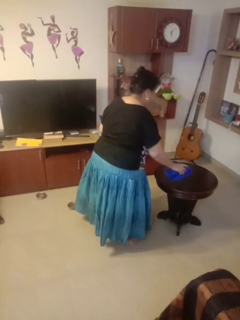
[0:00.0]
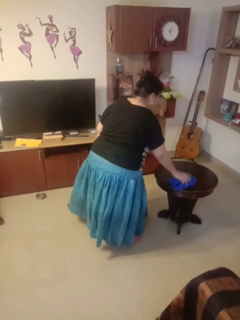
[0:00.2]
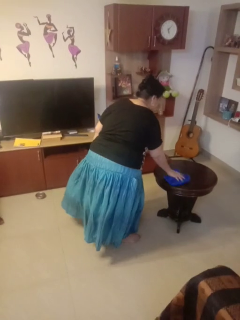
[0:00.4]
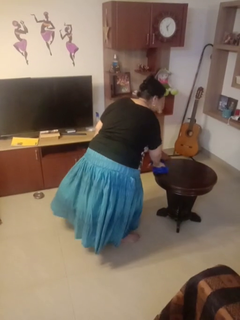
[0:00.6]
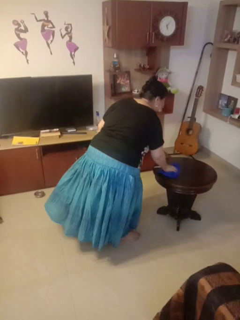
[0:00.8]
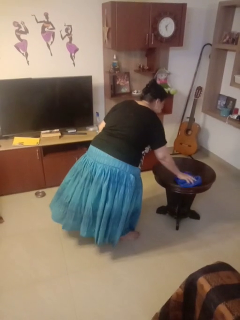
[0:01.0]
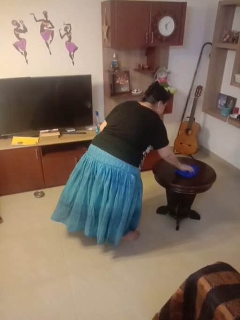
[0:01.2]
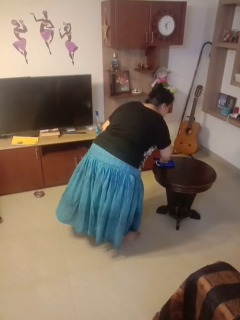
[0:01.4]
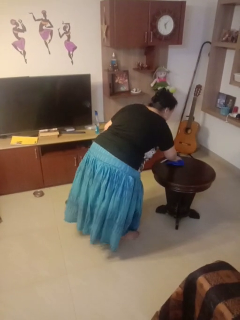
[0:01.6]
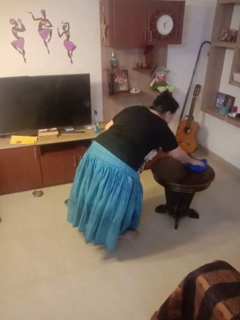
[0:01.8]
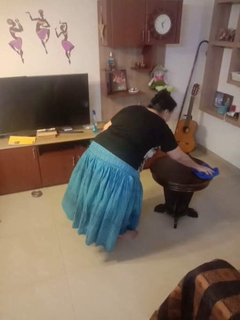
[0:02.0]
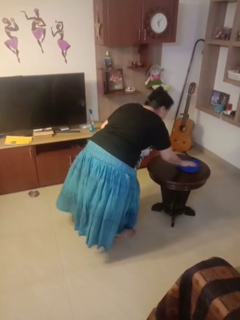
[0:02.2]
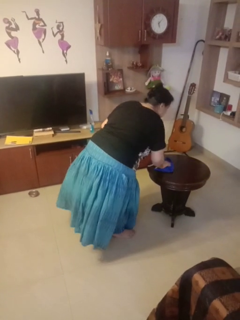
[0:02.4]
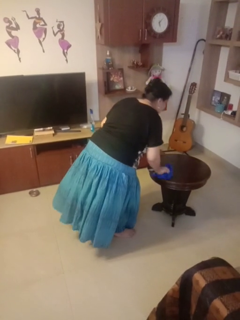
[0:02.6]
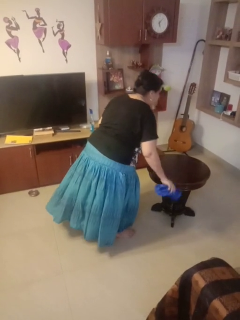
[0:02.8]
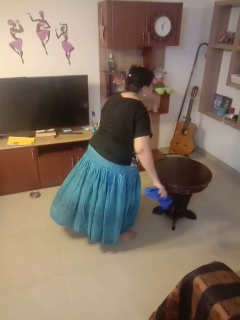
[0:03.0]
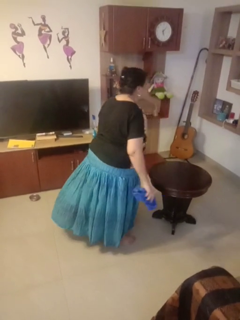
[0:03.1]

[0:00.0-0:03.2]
person cleans table with rag

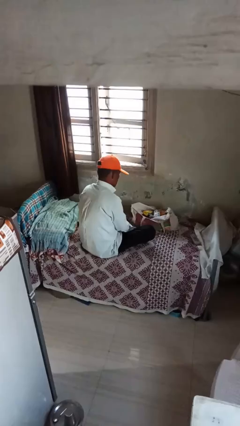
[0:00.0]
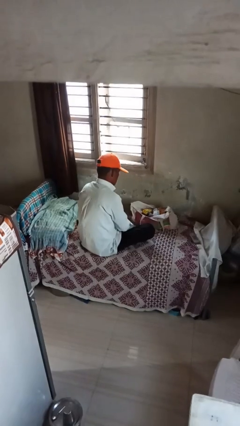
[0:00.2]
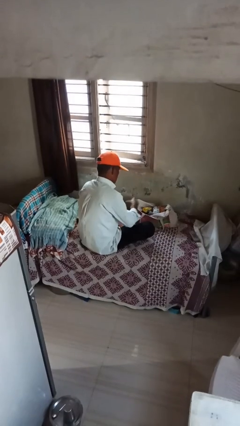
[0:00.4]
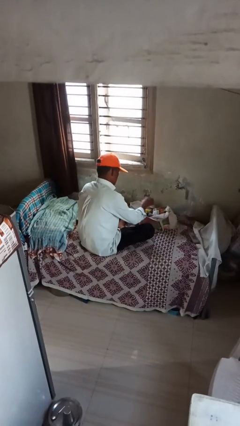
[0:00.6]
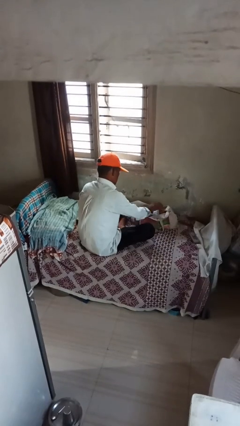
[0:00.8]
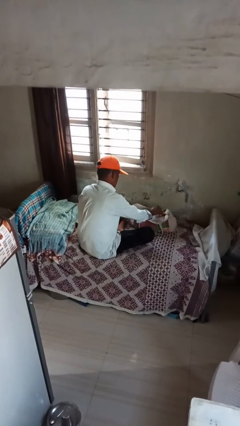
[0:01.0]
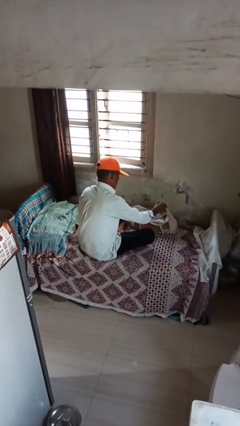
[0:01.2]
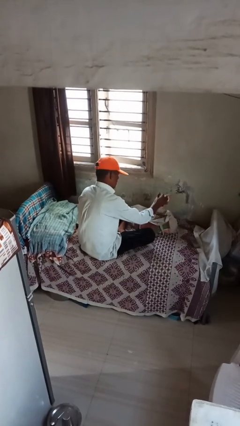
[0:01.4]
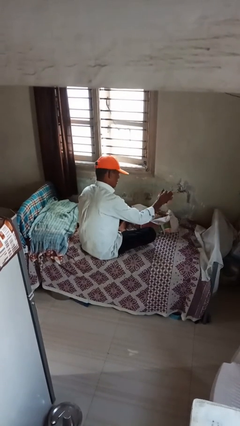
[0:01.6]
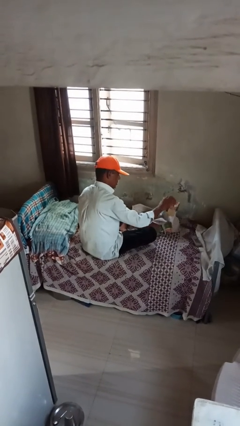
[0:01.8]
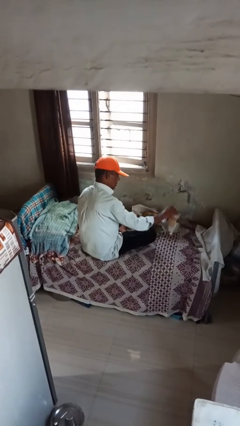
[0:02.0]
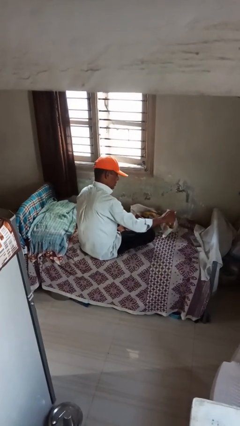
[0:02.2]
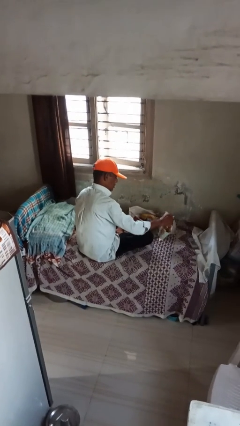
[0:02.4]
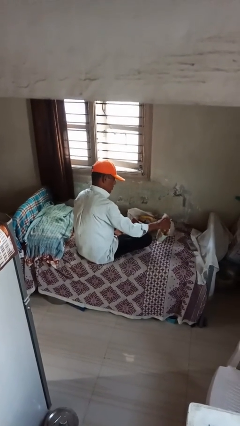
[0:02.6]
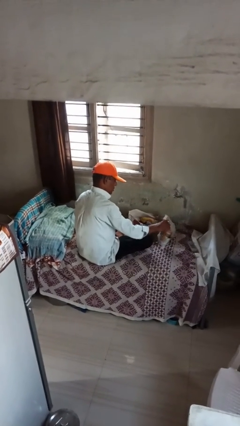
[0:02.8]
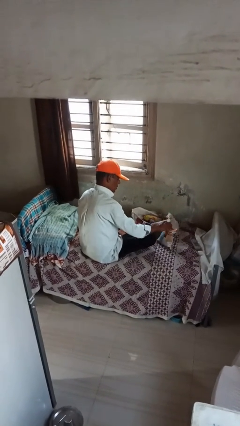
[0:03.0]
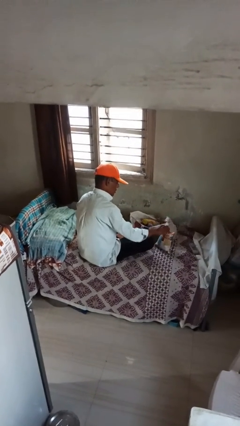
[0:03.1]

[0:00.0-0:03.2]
person takes object from bag

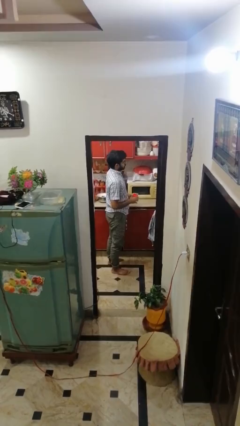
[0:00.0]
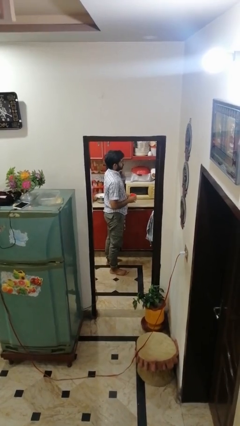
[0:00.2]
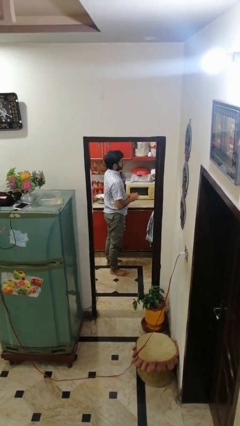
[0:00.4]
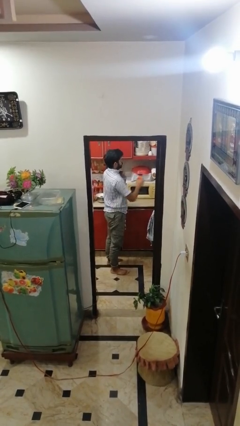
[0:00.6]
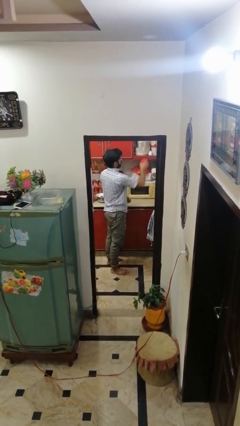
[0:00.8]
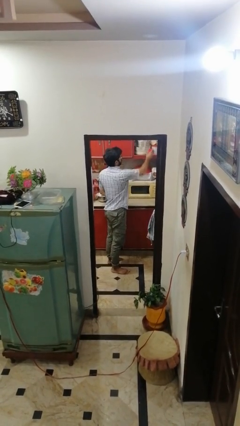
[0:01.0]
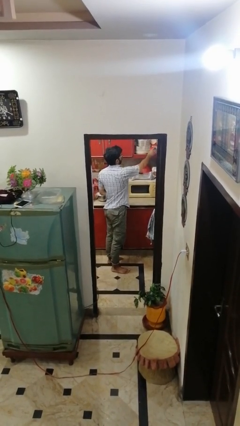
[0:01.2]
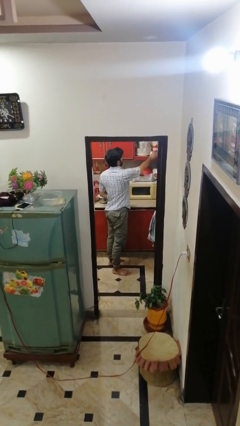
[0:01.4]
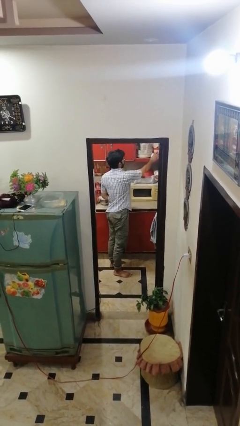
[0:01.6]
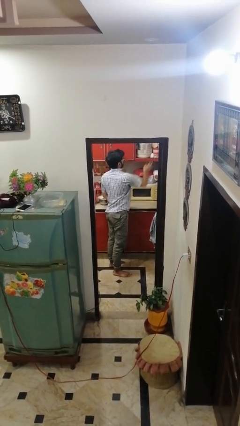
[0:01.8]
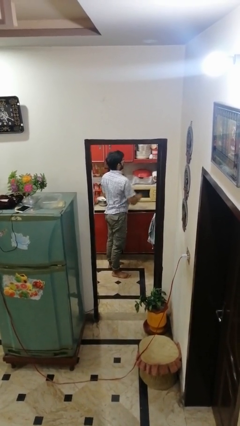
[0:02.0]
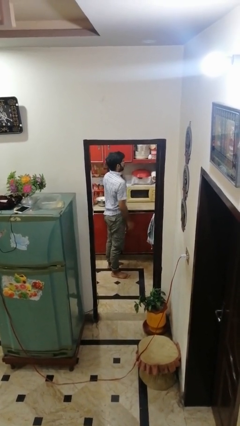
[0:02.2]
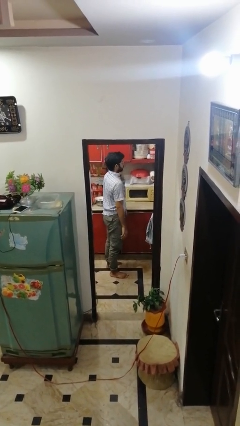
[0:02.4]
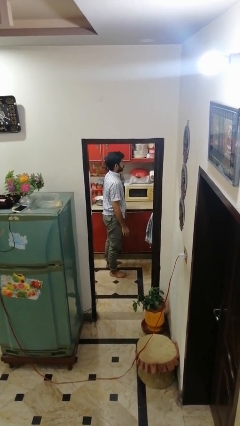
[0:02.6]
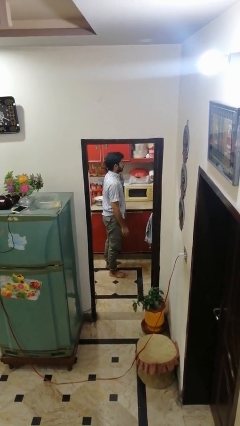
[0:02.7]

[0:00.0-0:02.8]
person puts down object into cabinet

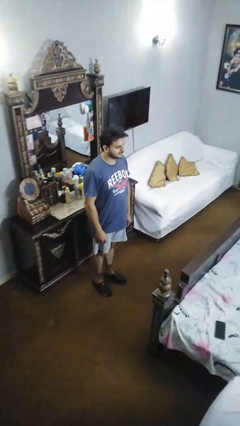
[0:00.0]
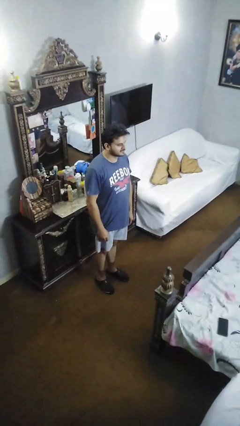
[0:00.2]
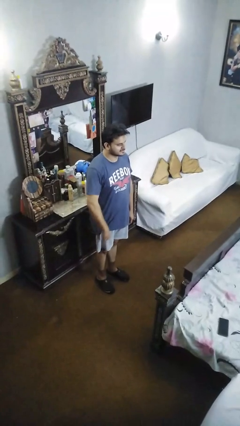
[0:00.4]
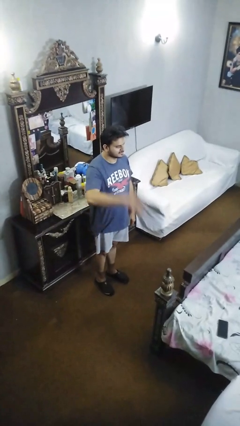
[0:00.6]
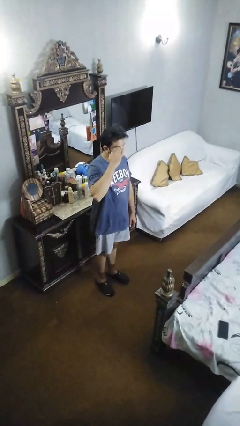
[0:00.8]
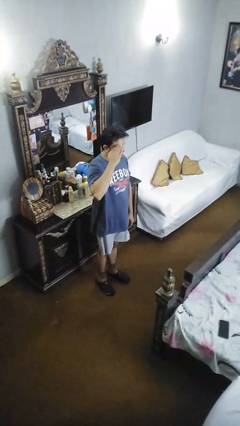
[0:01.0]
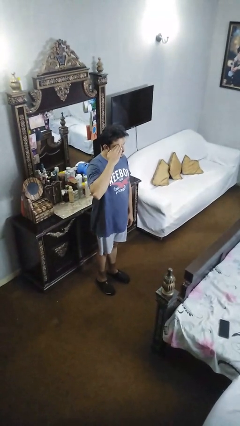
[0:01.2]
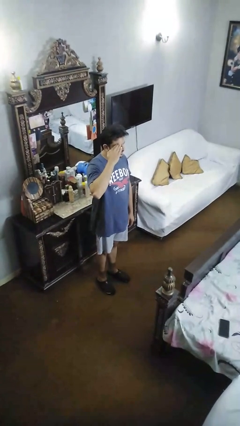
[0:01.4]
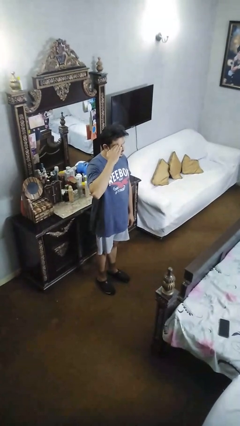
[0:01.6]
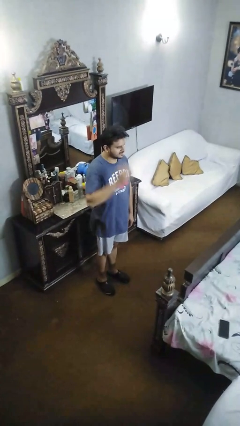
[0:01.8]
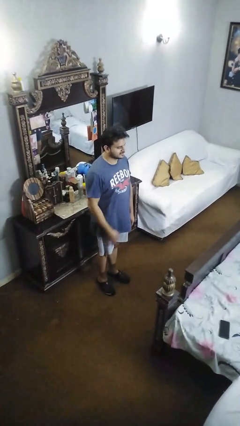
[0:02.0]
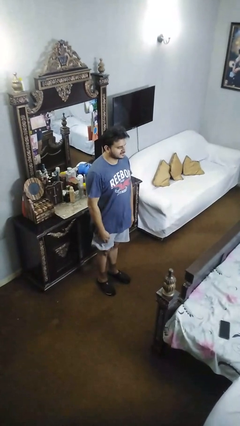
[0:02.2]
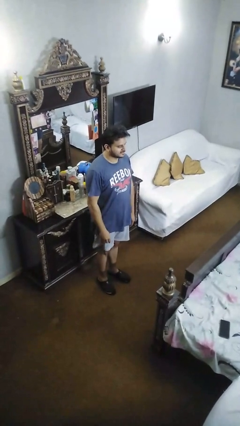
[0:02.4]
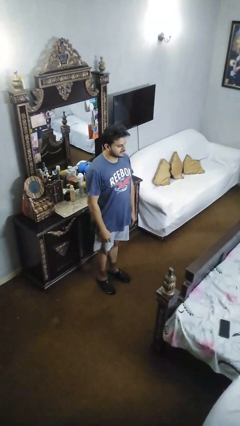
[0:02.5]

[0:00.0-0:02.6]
person salutes

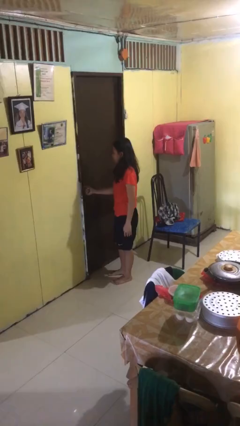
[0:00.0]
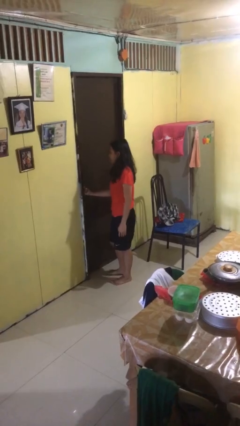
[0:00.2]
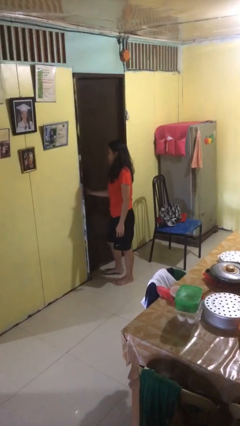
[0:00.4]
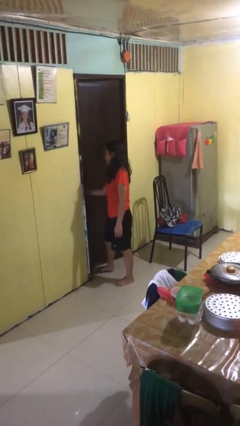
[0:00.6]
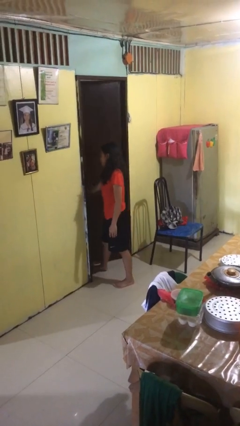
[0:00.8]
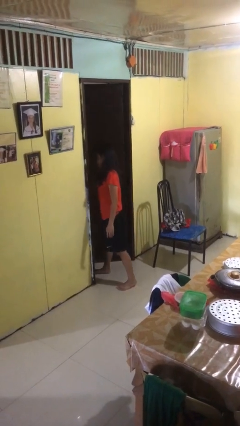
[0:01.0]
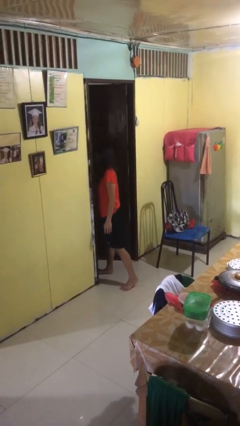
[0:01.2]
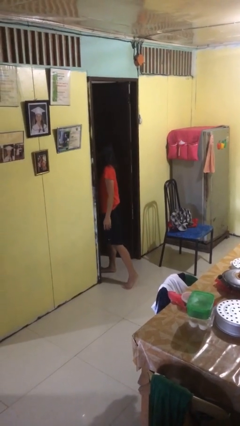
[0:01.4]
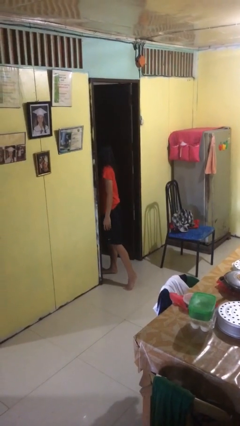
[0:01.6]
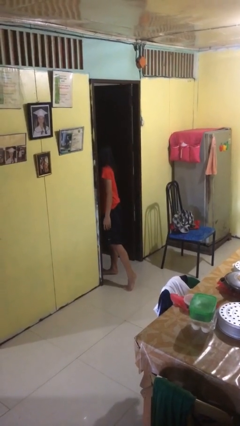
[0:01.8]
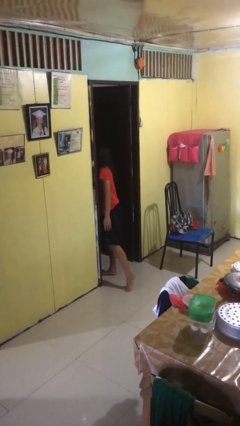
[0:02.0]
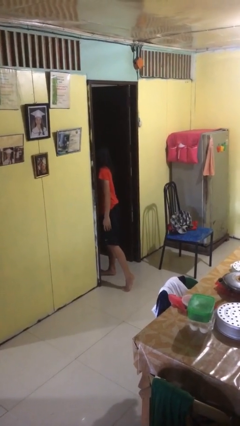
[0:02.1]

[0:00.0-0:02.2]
person opens facility door

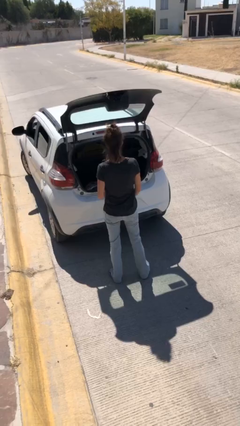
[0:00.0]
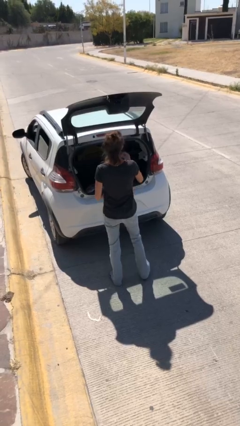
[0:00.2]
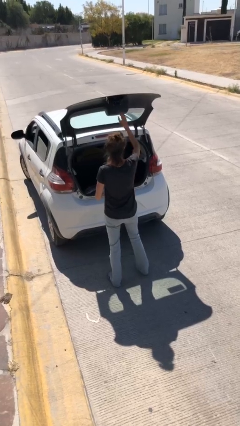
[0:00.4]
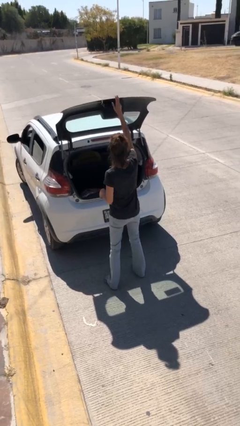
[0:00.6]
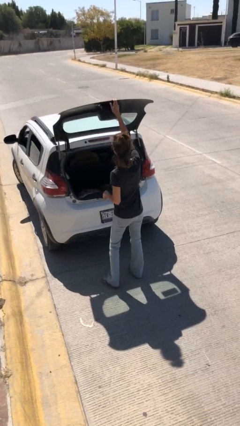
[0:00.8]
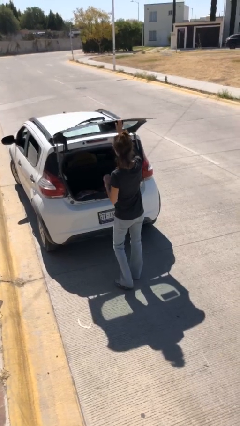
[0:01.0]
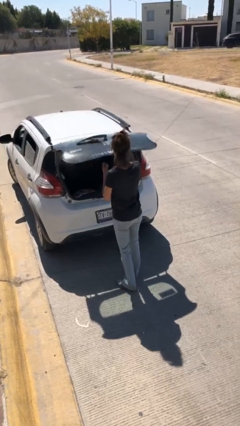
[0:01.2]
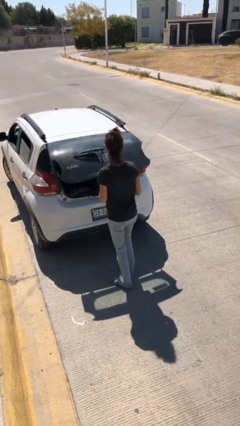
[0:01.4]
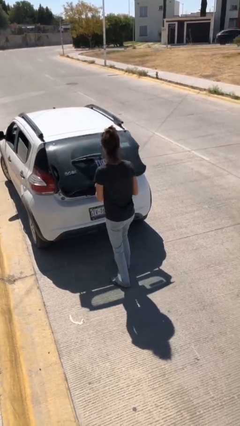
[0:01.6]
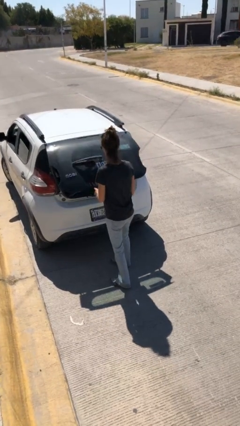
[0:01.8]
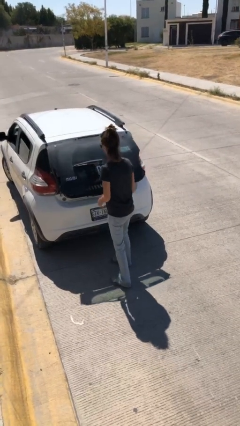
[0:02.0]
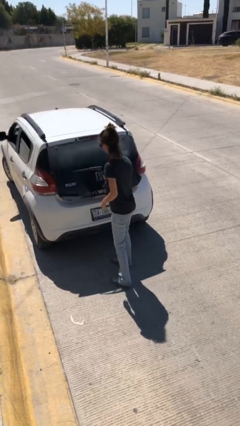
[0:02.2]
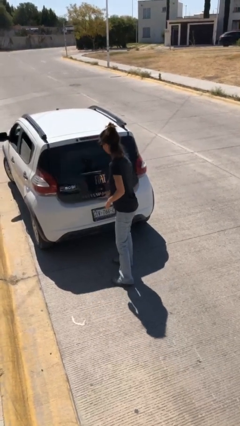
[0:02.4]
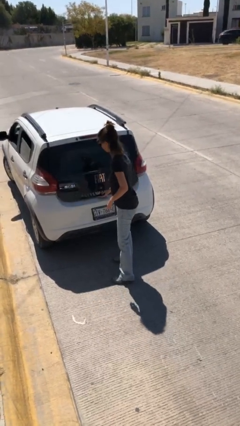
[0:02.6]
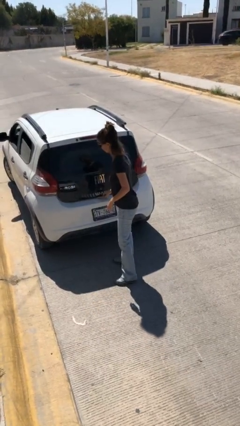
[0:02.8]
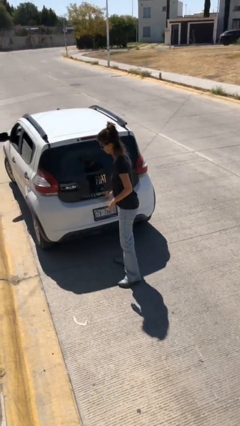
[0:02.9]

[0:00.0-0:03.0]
person closes car trunk

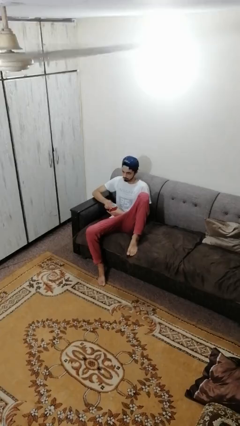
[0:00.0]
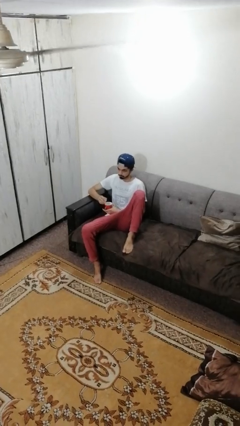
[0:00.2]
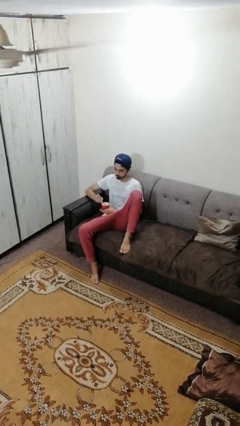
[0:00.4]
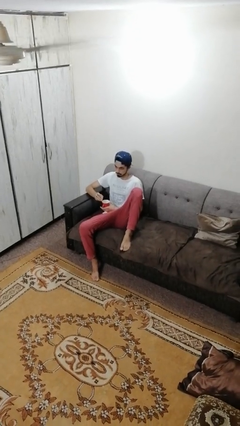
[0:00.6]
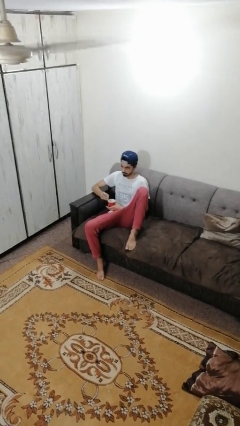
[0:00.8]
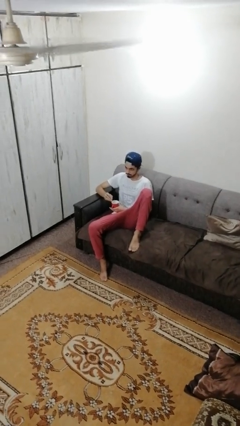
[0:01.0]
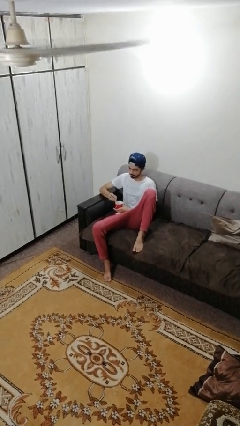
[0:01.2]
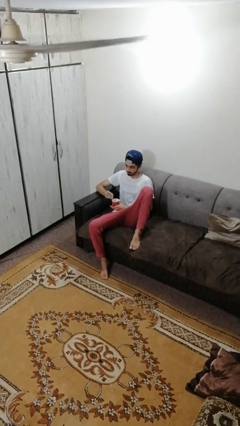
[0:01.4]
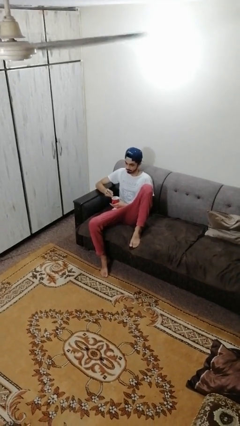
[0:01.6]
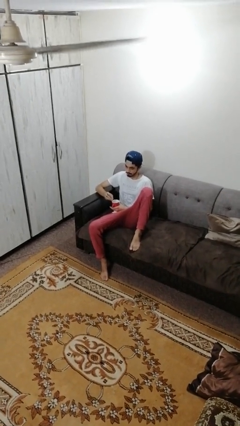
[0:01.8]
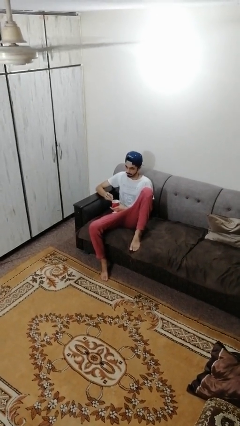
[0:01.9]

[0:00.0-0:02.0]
person stirs mug
